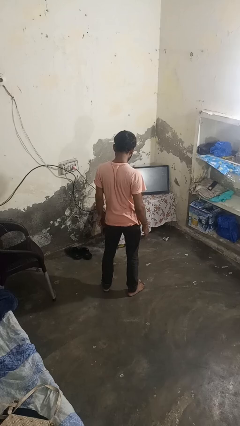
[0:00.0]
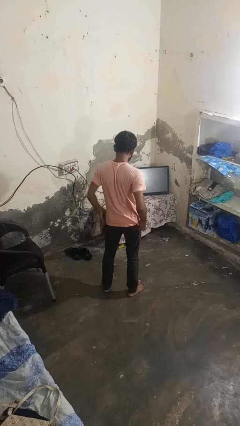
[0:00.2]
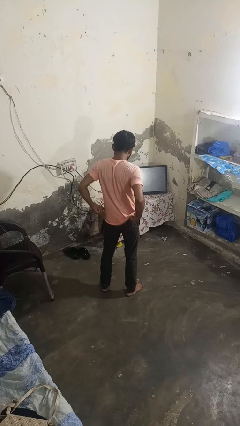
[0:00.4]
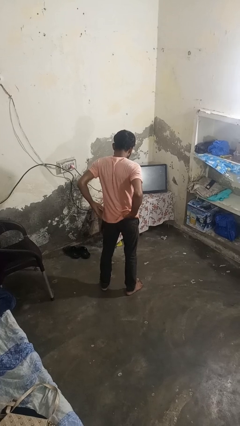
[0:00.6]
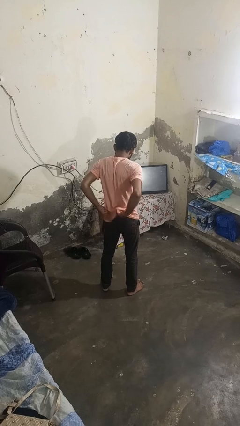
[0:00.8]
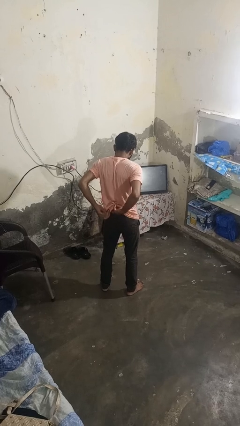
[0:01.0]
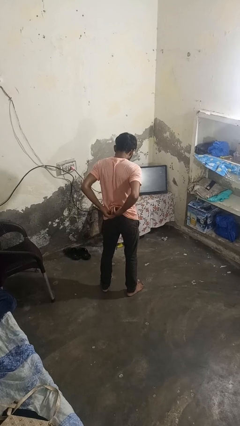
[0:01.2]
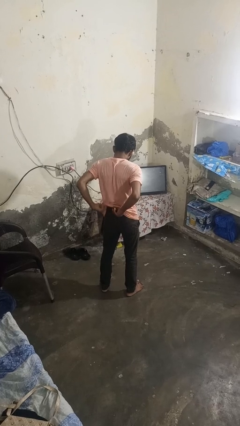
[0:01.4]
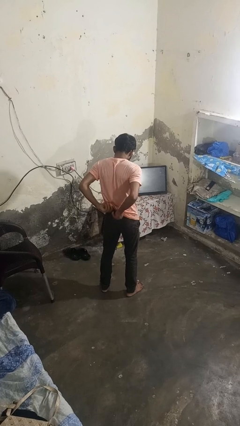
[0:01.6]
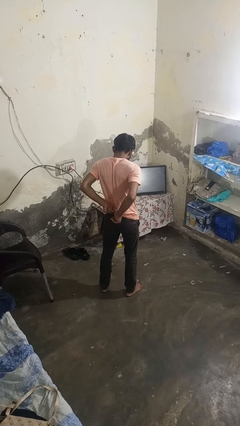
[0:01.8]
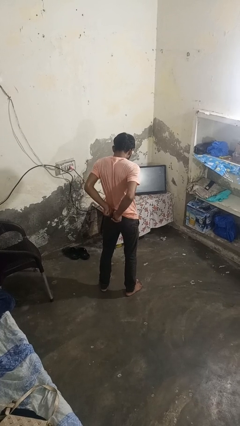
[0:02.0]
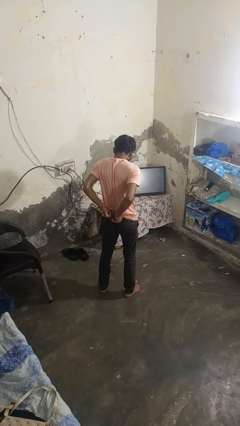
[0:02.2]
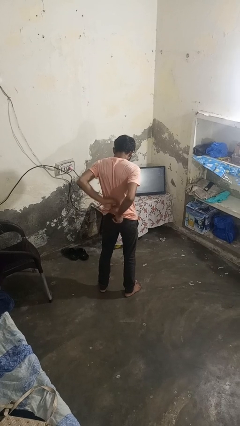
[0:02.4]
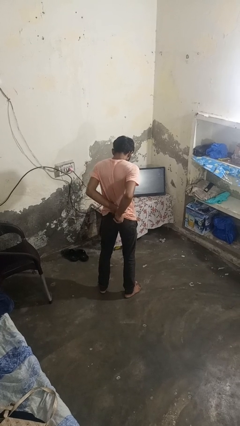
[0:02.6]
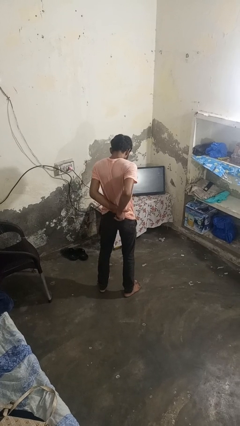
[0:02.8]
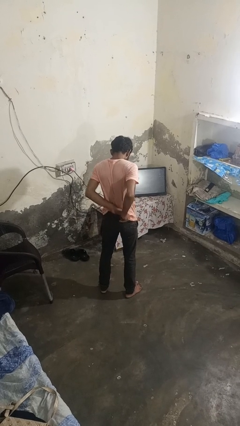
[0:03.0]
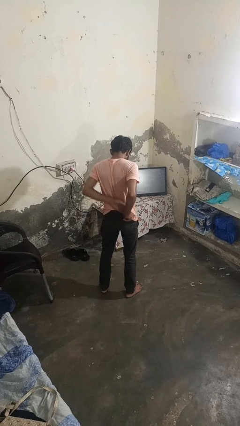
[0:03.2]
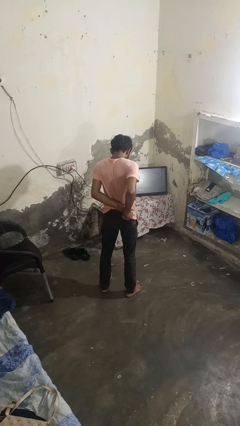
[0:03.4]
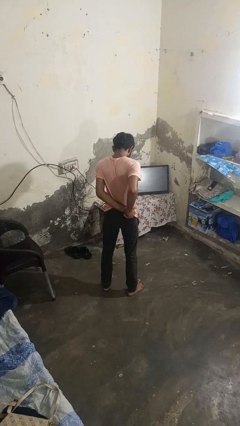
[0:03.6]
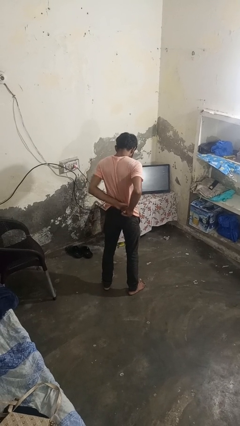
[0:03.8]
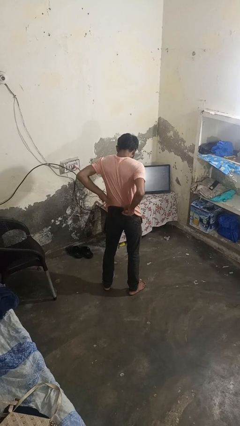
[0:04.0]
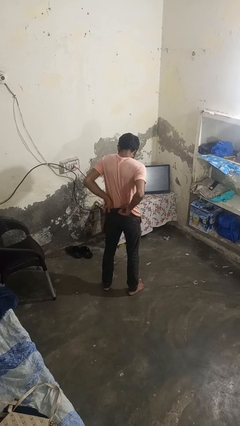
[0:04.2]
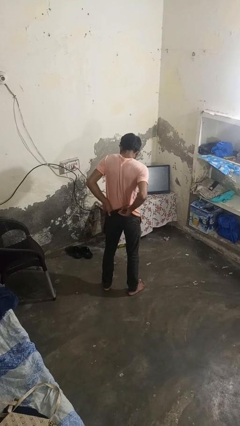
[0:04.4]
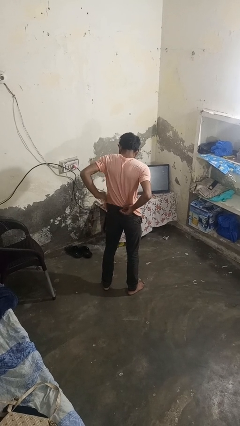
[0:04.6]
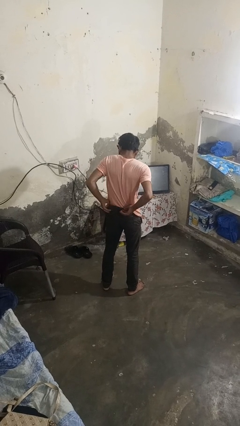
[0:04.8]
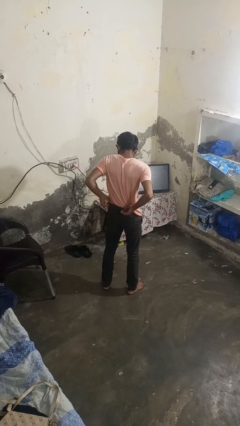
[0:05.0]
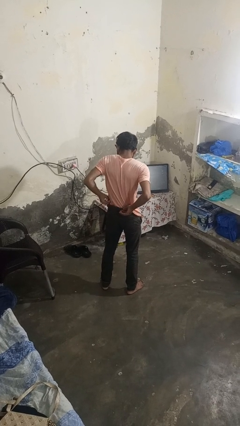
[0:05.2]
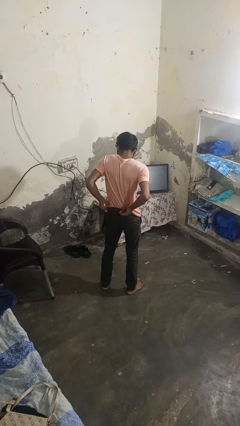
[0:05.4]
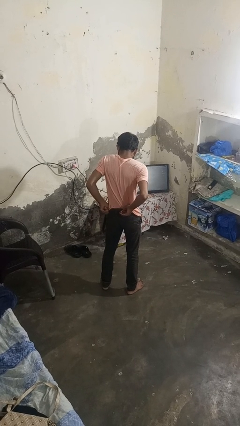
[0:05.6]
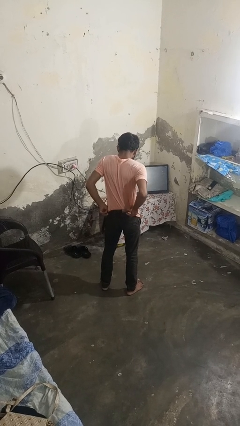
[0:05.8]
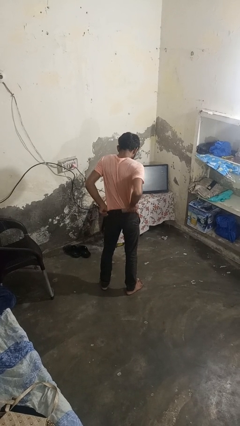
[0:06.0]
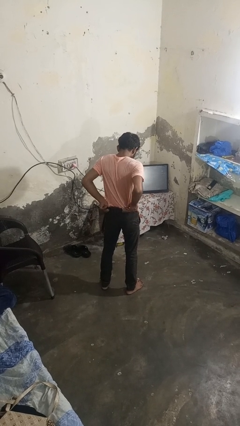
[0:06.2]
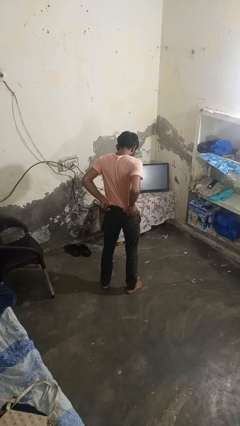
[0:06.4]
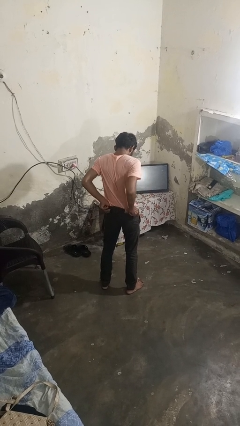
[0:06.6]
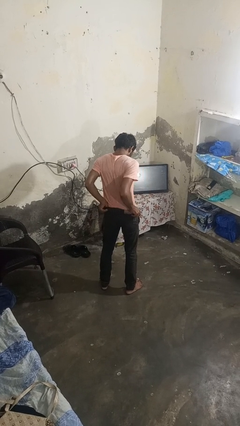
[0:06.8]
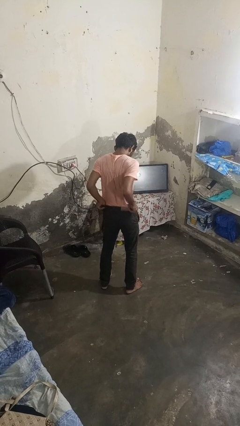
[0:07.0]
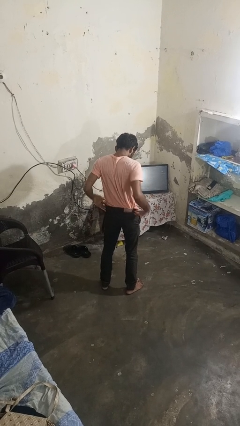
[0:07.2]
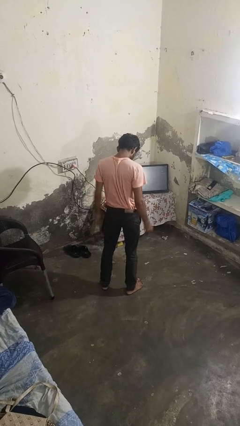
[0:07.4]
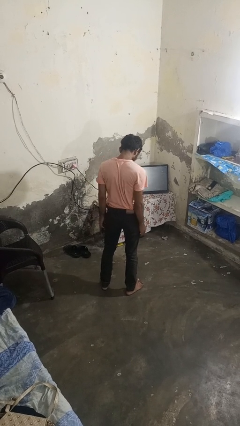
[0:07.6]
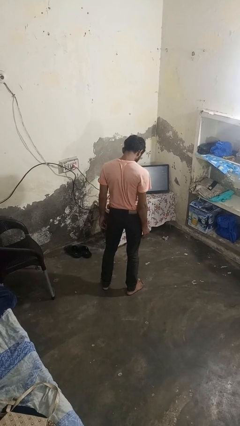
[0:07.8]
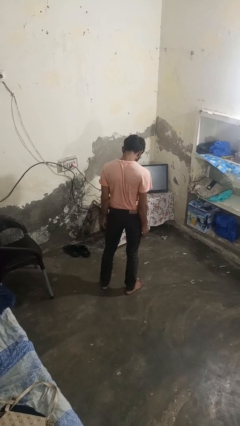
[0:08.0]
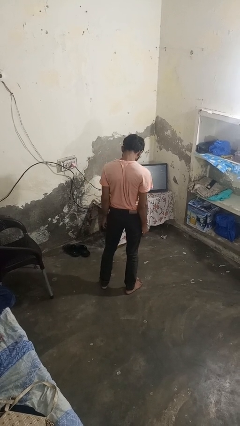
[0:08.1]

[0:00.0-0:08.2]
person tucks in shirt

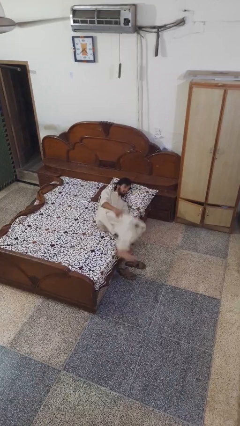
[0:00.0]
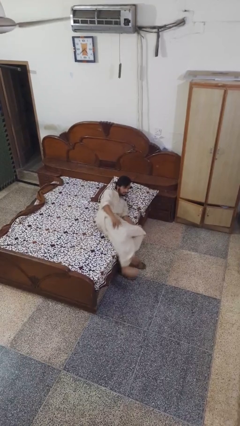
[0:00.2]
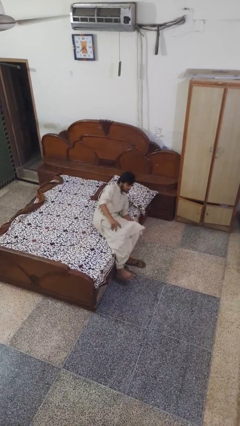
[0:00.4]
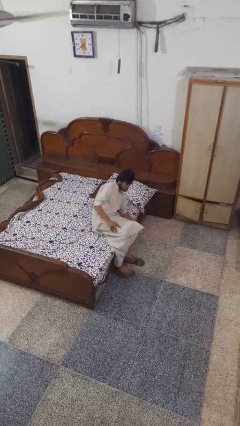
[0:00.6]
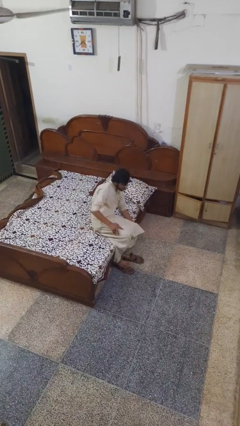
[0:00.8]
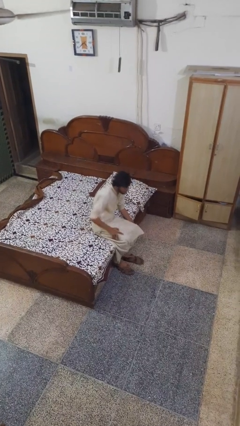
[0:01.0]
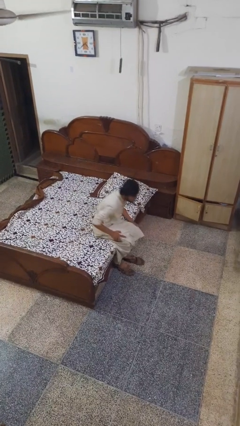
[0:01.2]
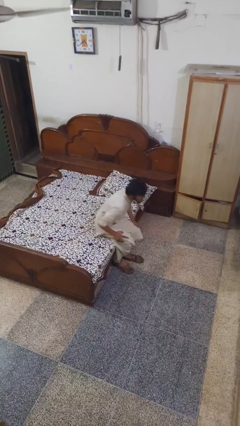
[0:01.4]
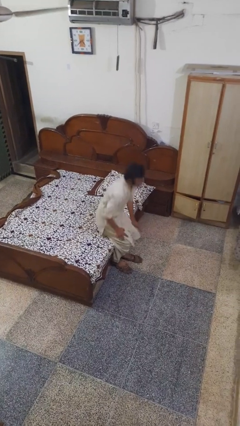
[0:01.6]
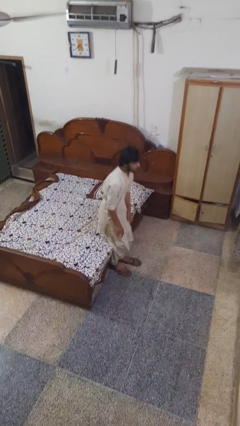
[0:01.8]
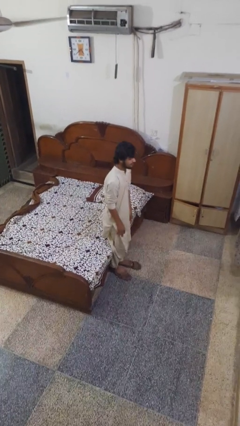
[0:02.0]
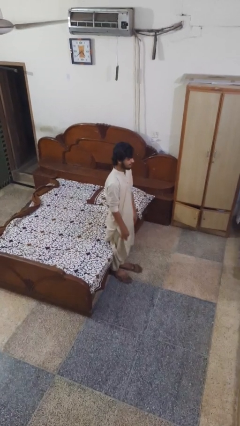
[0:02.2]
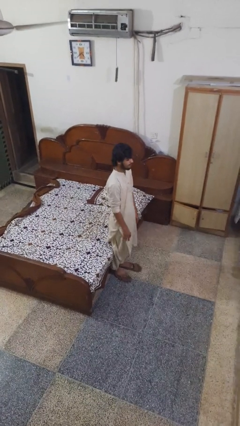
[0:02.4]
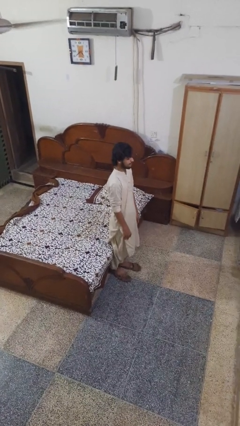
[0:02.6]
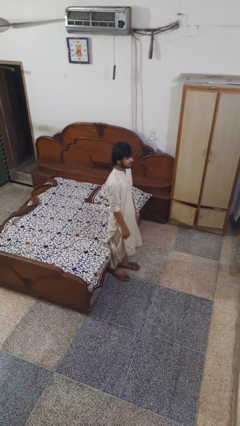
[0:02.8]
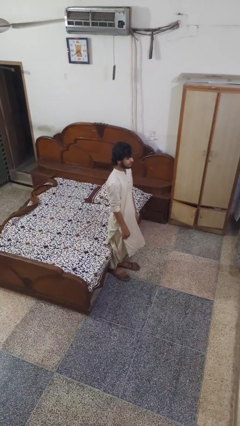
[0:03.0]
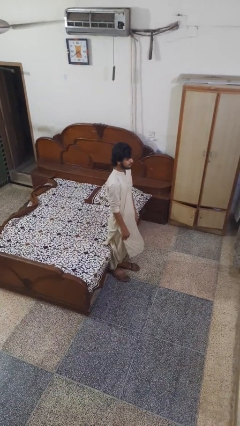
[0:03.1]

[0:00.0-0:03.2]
person stands up

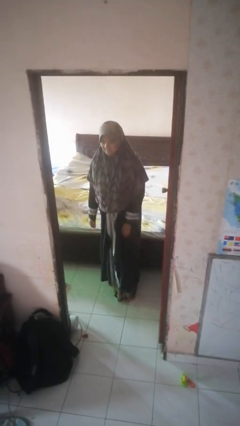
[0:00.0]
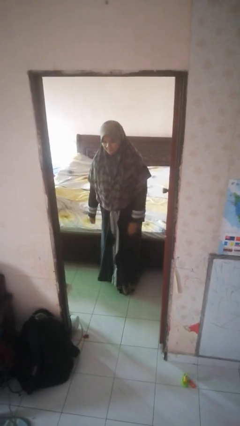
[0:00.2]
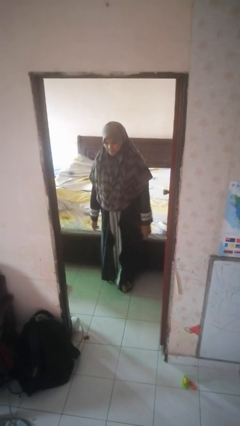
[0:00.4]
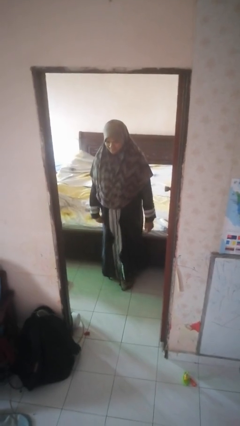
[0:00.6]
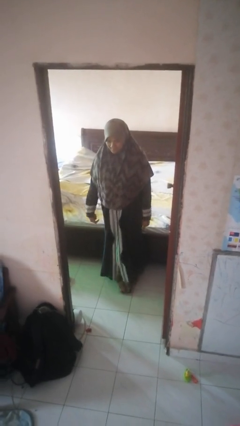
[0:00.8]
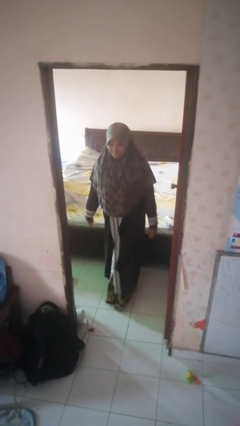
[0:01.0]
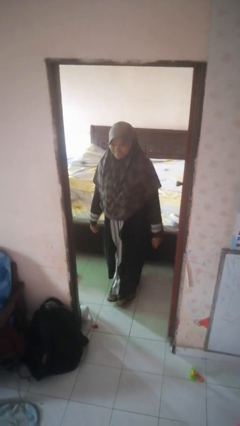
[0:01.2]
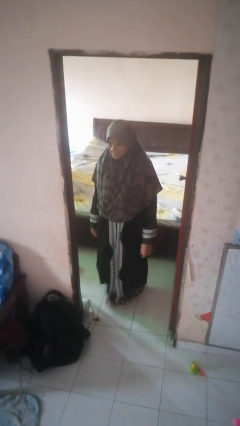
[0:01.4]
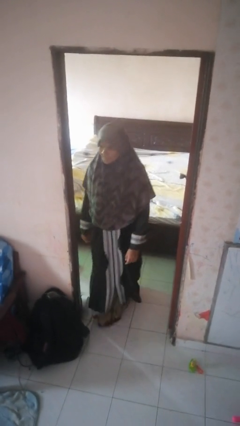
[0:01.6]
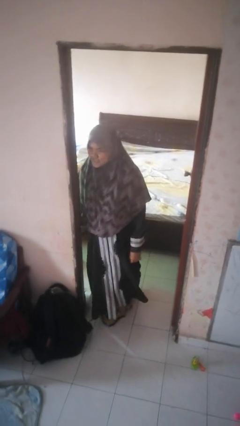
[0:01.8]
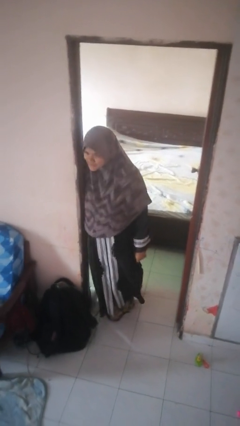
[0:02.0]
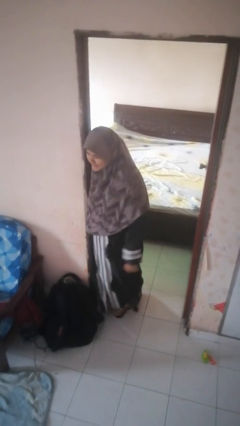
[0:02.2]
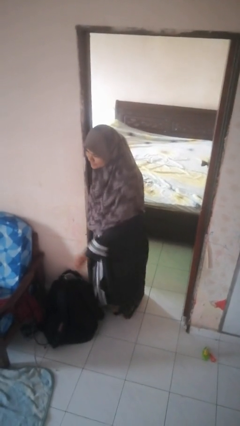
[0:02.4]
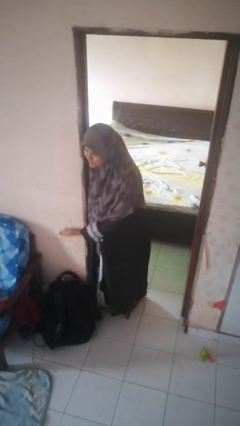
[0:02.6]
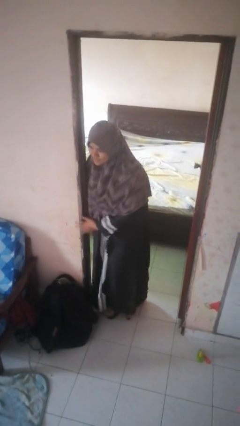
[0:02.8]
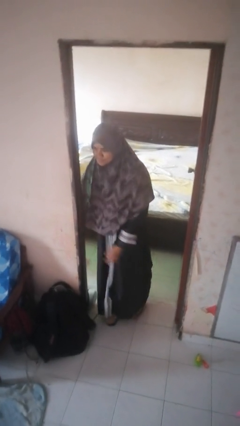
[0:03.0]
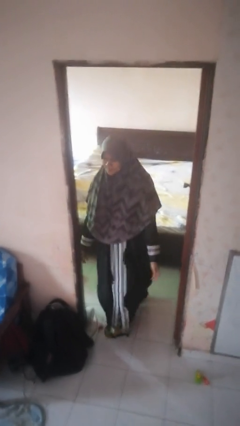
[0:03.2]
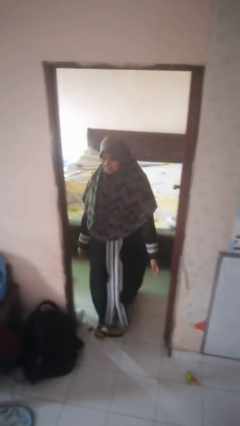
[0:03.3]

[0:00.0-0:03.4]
person bumps into wall

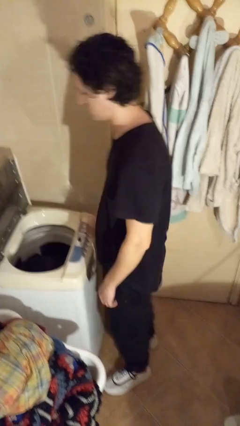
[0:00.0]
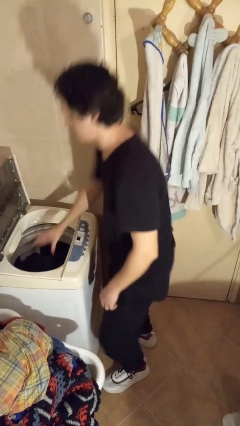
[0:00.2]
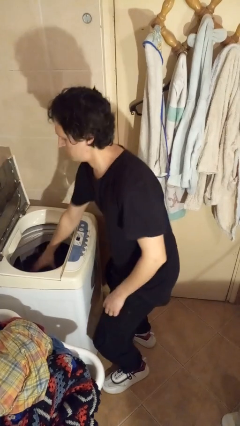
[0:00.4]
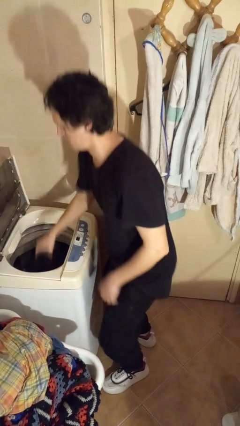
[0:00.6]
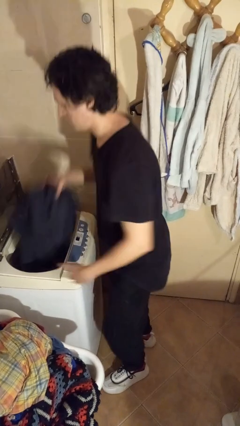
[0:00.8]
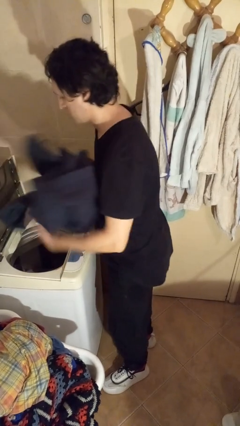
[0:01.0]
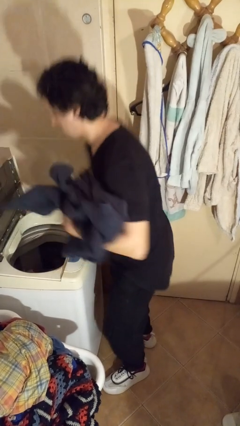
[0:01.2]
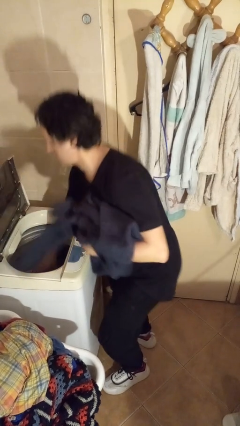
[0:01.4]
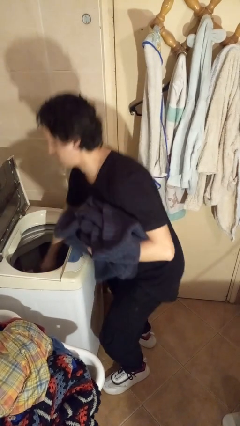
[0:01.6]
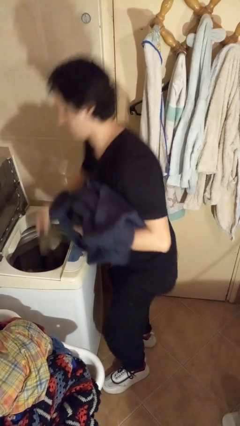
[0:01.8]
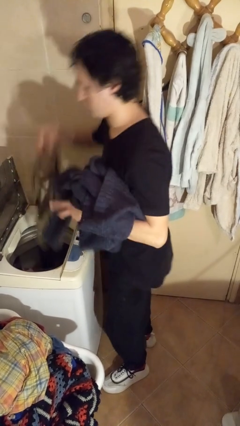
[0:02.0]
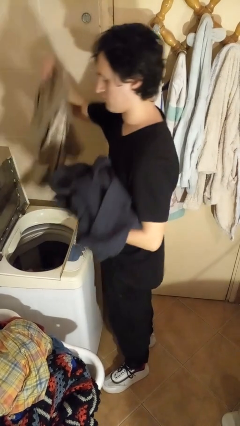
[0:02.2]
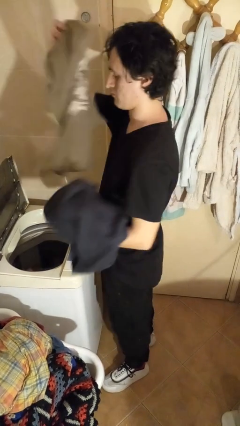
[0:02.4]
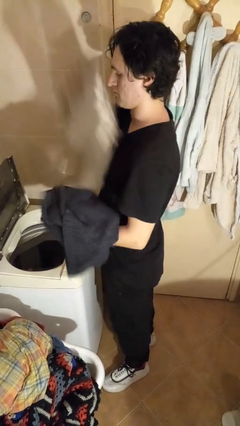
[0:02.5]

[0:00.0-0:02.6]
person loads clotheswasher

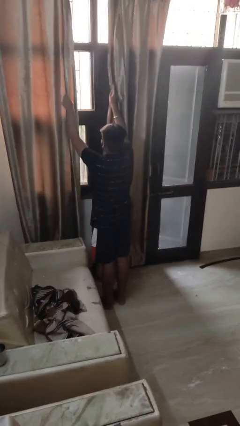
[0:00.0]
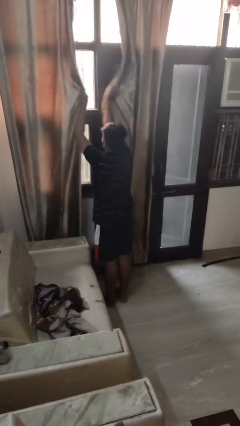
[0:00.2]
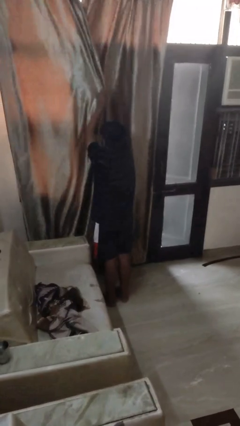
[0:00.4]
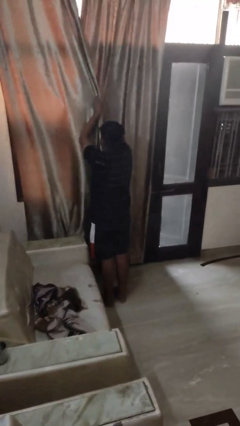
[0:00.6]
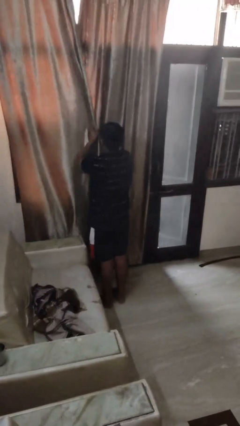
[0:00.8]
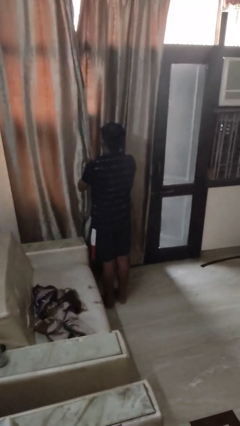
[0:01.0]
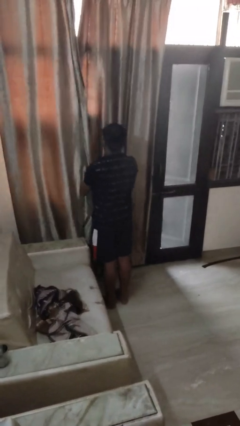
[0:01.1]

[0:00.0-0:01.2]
person closes curtains
